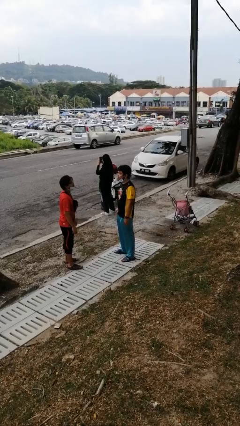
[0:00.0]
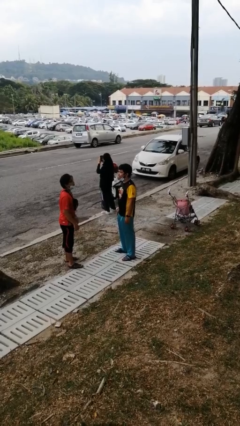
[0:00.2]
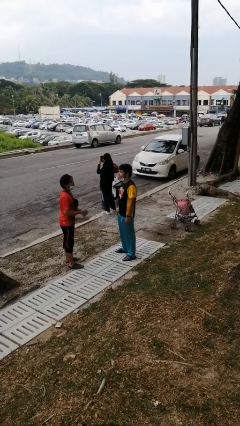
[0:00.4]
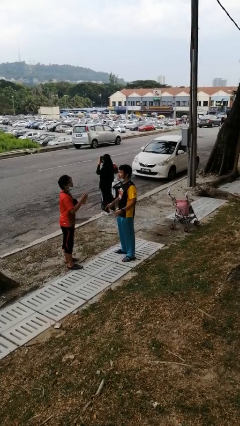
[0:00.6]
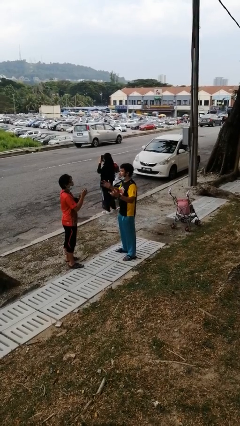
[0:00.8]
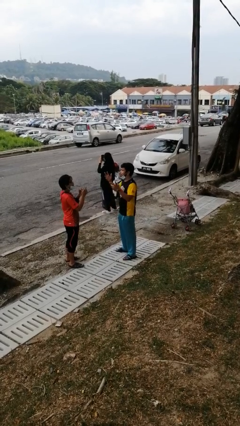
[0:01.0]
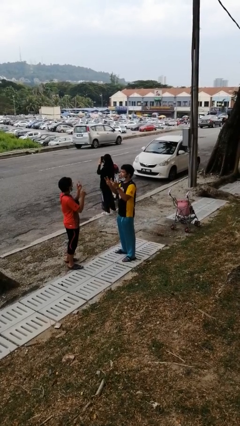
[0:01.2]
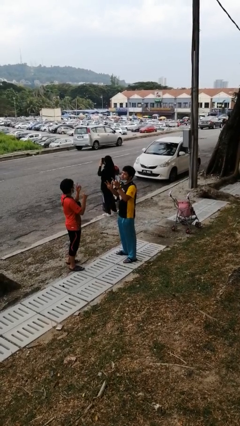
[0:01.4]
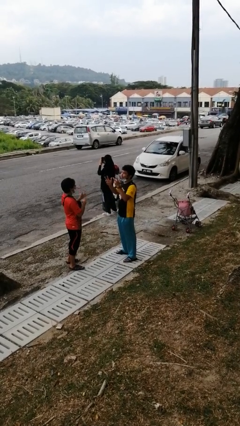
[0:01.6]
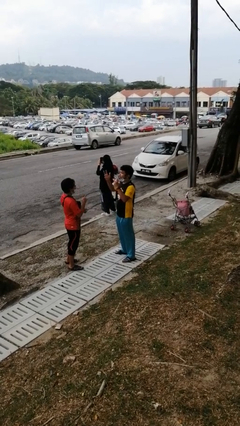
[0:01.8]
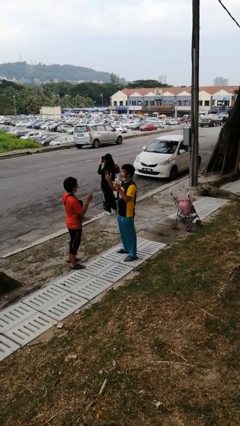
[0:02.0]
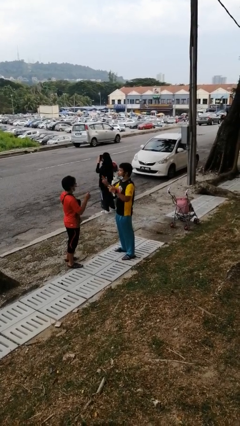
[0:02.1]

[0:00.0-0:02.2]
person talks to person

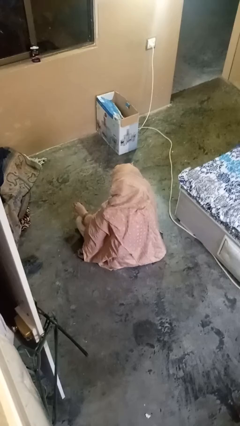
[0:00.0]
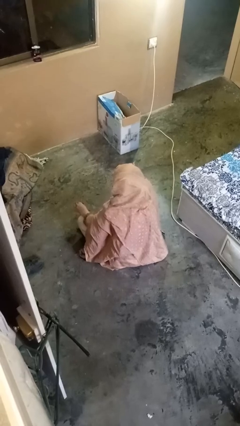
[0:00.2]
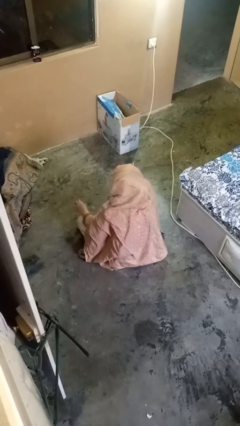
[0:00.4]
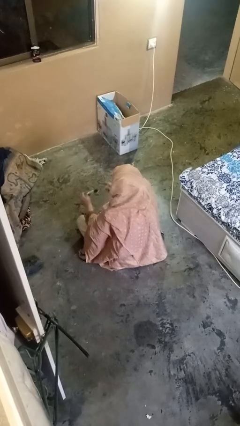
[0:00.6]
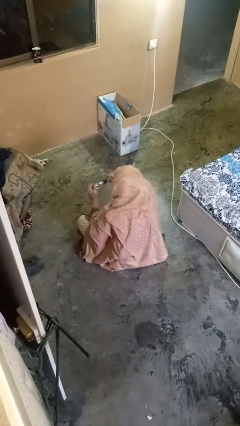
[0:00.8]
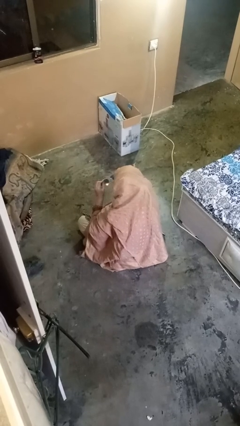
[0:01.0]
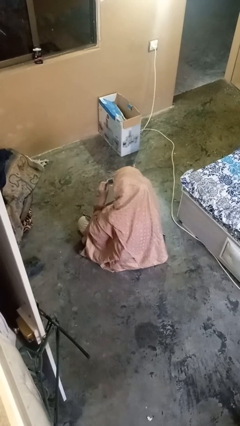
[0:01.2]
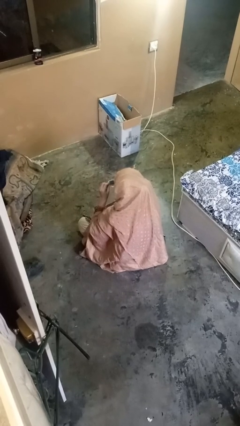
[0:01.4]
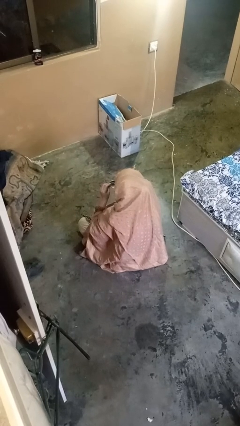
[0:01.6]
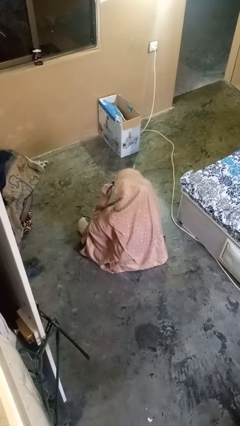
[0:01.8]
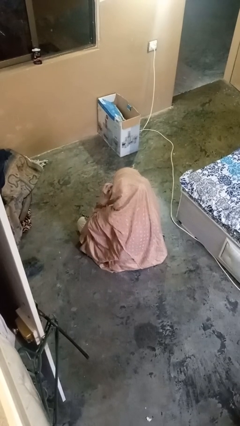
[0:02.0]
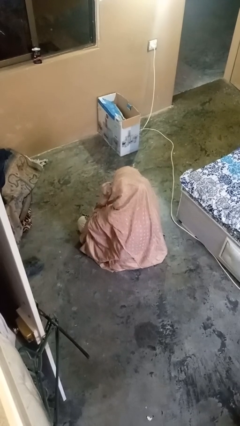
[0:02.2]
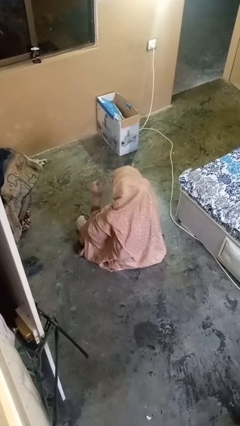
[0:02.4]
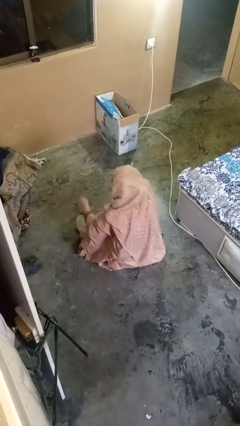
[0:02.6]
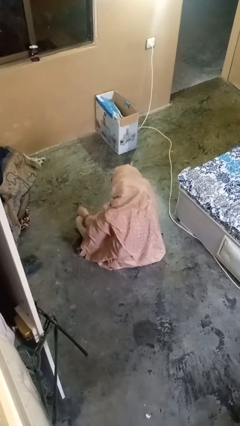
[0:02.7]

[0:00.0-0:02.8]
person puts on glasses

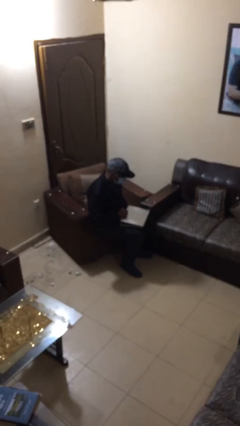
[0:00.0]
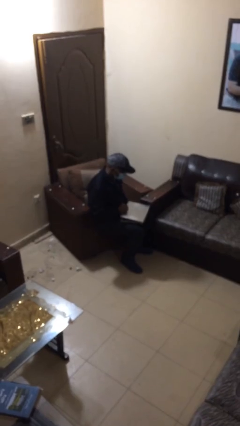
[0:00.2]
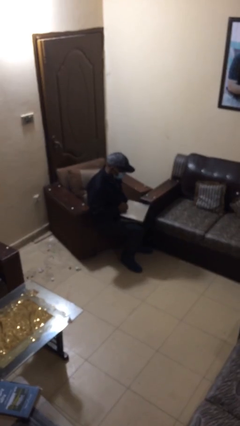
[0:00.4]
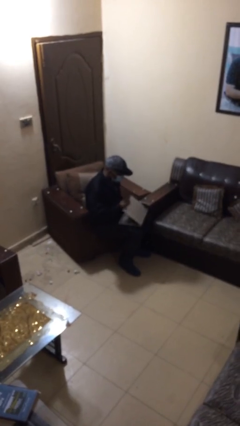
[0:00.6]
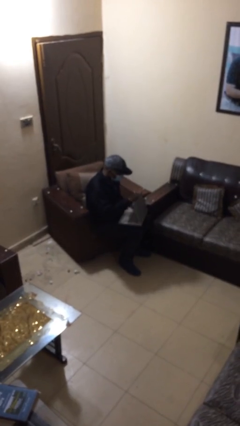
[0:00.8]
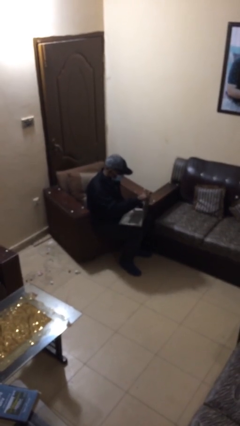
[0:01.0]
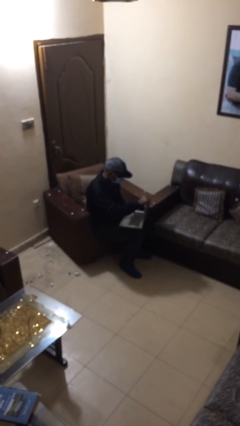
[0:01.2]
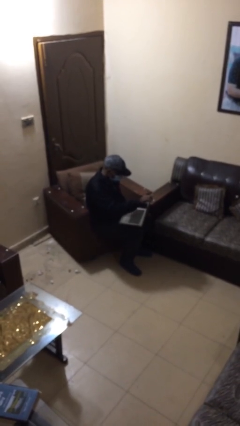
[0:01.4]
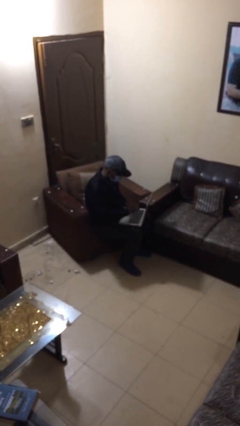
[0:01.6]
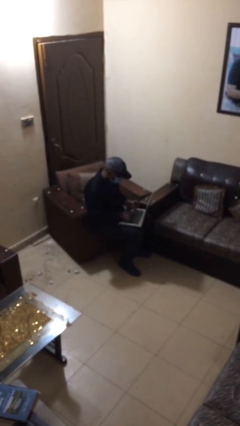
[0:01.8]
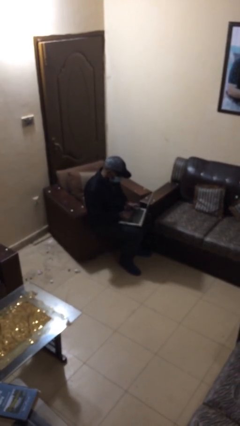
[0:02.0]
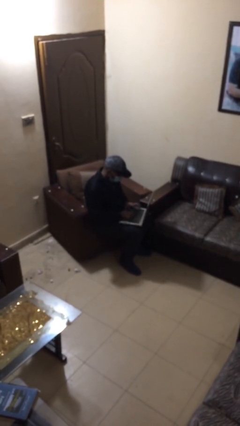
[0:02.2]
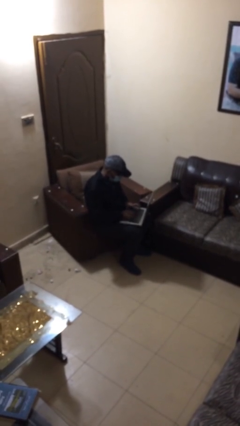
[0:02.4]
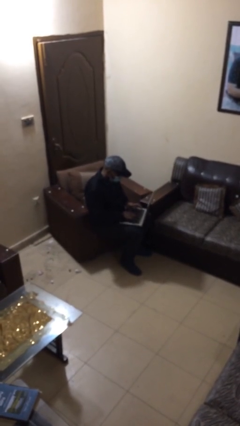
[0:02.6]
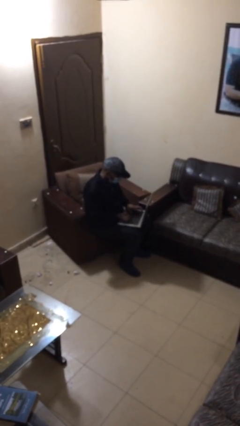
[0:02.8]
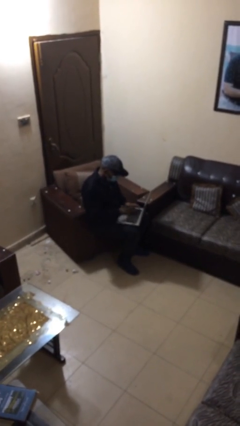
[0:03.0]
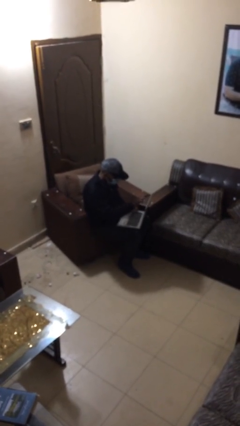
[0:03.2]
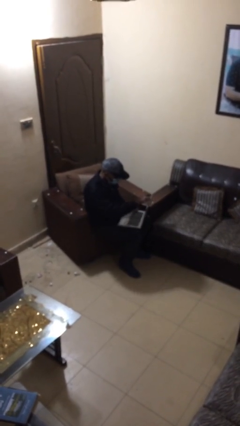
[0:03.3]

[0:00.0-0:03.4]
person interacts with laptop

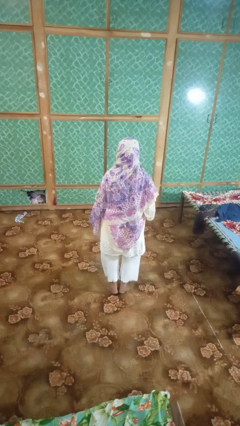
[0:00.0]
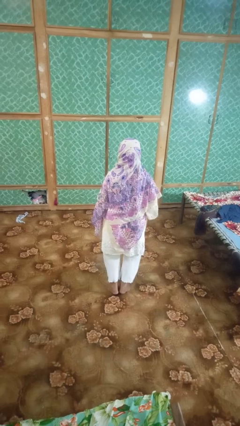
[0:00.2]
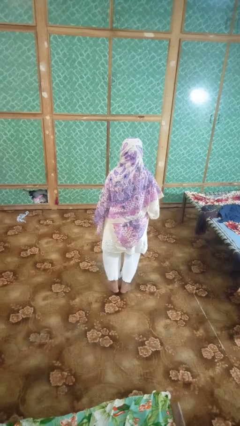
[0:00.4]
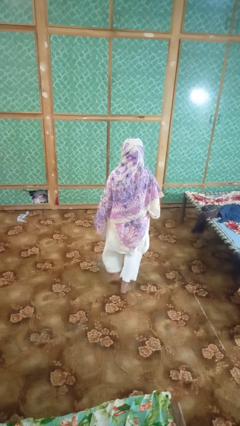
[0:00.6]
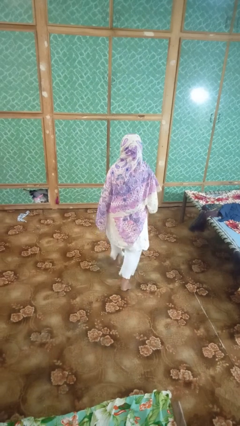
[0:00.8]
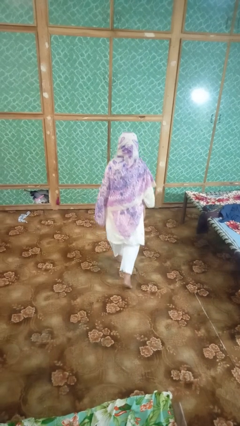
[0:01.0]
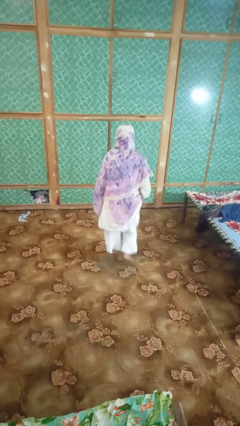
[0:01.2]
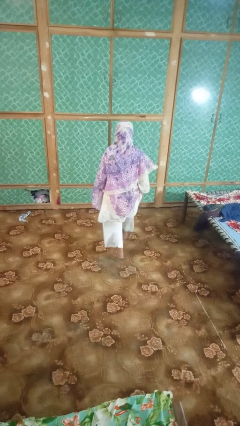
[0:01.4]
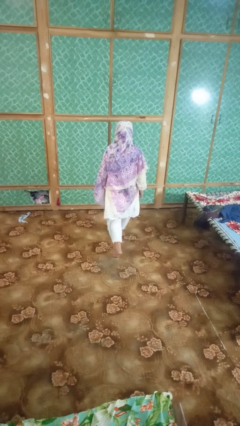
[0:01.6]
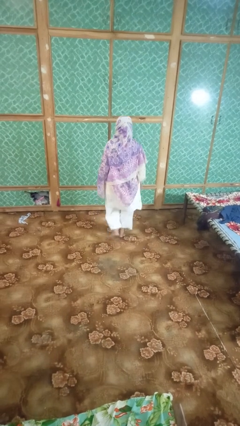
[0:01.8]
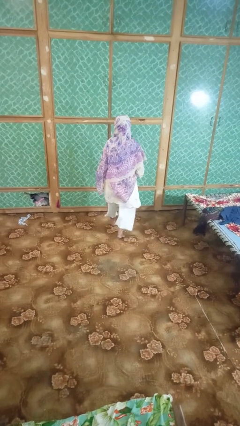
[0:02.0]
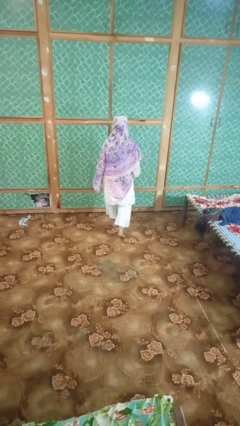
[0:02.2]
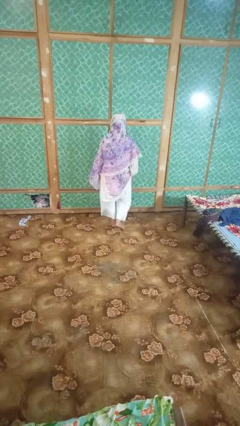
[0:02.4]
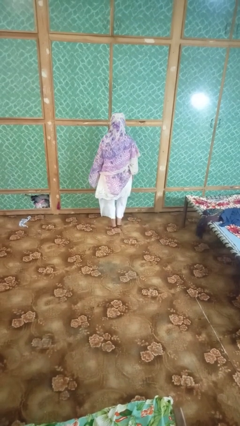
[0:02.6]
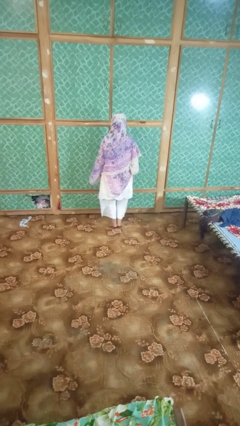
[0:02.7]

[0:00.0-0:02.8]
person walks tiptoe

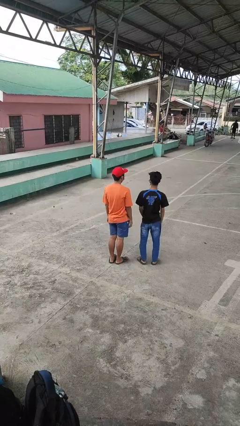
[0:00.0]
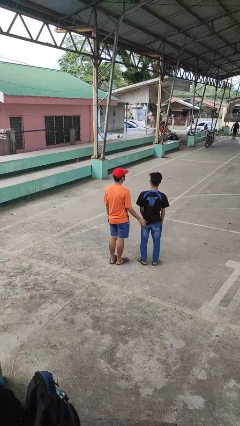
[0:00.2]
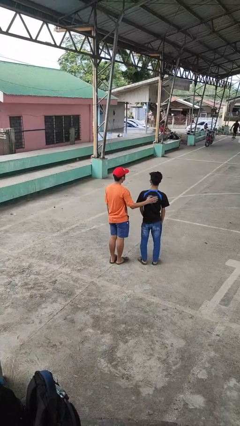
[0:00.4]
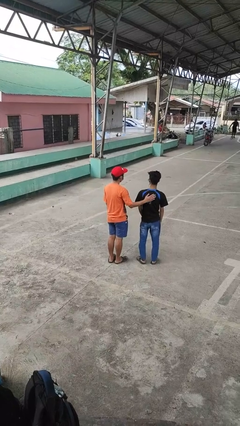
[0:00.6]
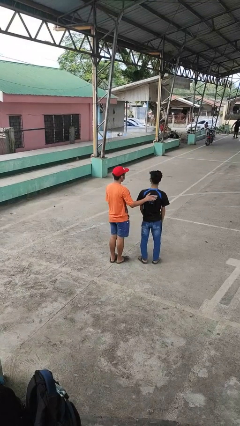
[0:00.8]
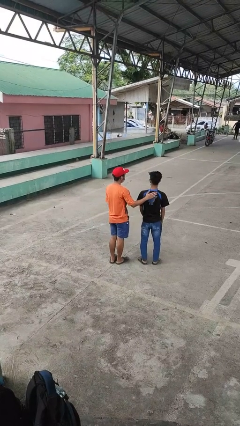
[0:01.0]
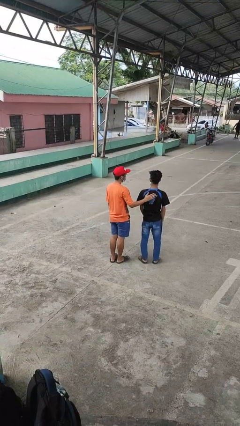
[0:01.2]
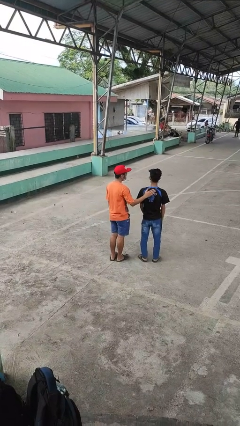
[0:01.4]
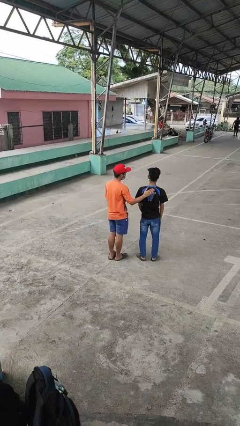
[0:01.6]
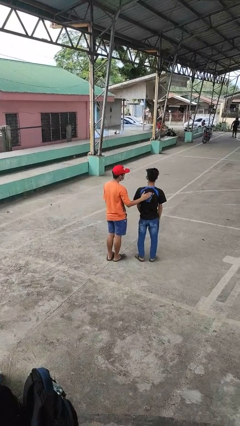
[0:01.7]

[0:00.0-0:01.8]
person touches back of person

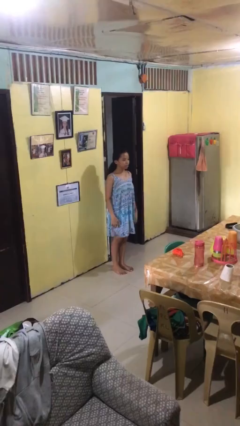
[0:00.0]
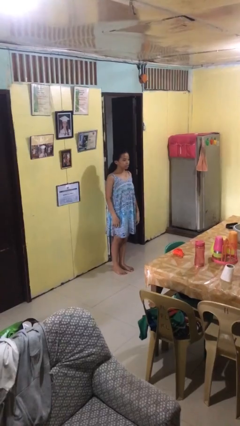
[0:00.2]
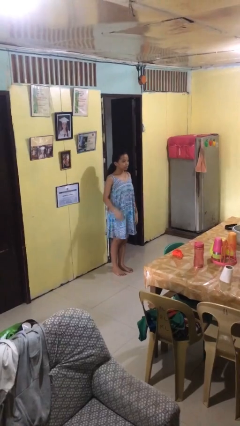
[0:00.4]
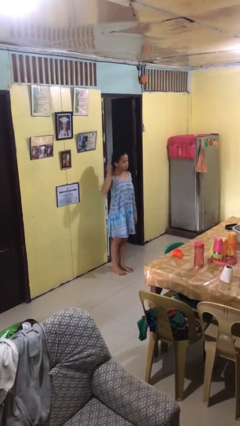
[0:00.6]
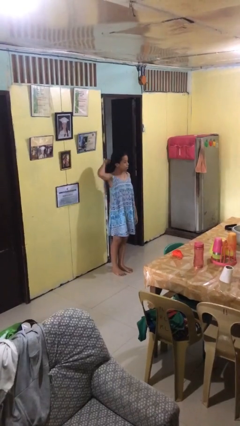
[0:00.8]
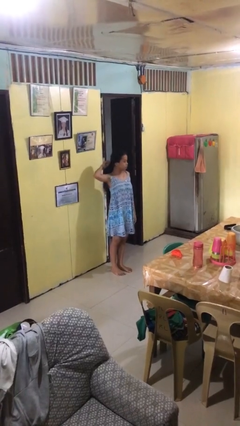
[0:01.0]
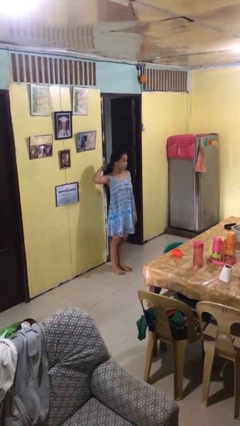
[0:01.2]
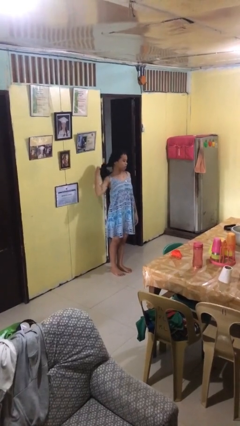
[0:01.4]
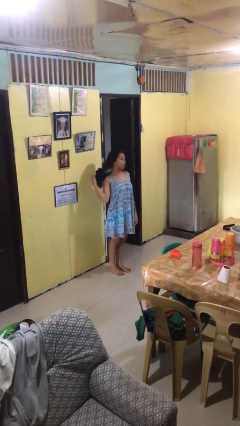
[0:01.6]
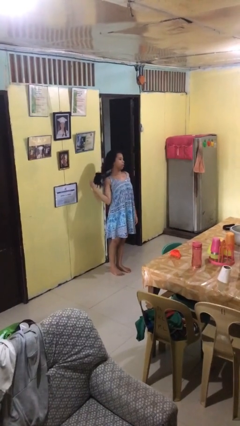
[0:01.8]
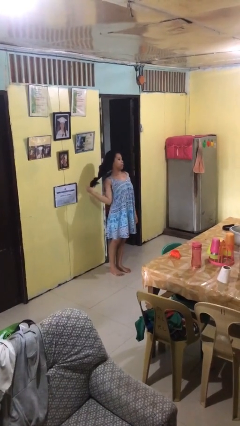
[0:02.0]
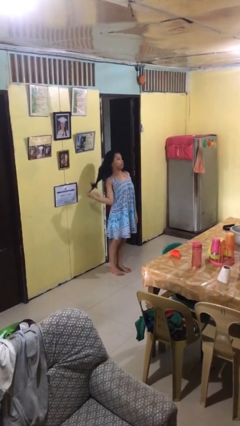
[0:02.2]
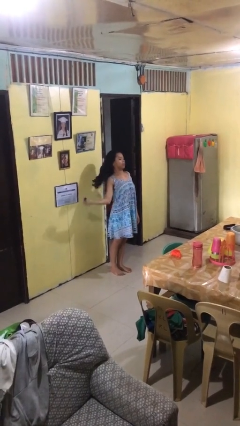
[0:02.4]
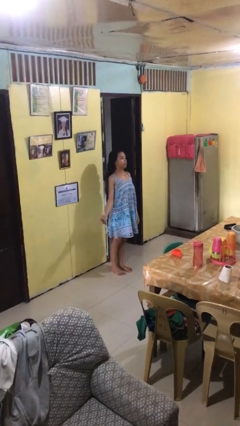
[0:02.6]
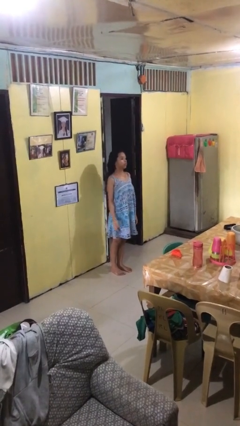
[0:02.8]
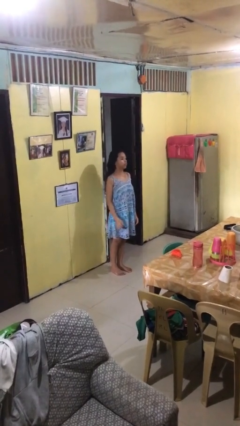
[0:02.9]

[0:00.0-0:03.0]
person takes off hairtie

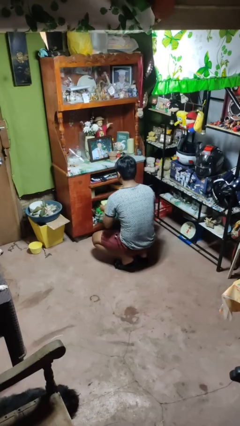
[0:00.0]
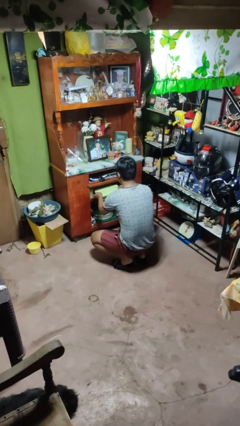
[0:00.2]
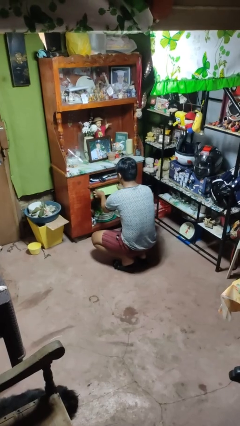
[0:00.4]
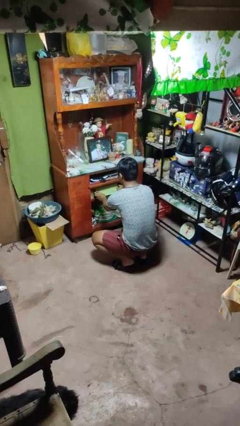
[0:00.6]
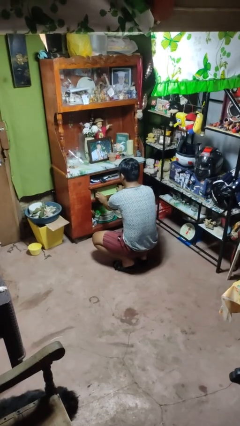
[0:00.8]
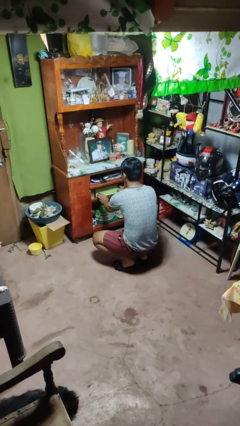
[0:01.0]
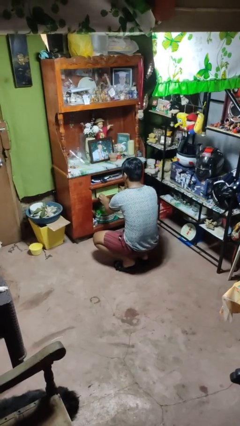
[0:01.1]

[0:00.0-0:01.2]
person puts down object into cabinet
